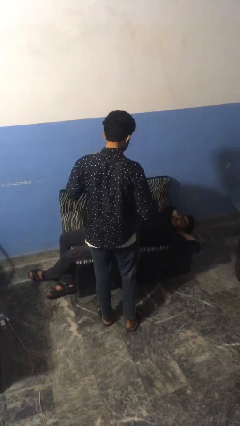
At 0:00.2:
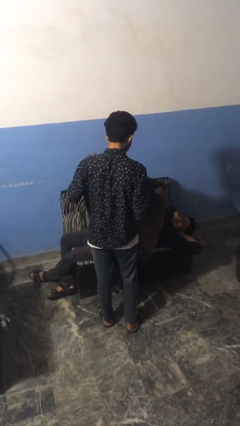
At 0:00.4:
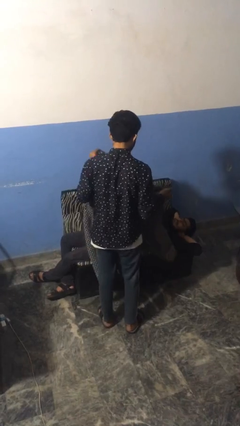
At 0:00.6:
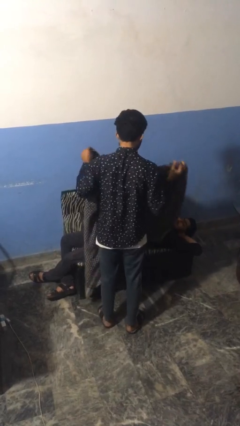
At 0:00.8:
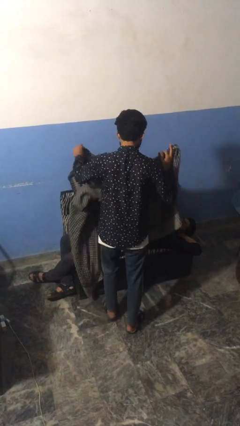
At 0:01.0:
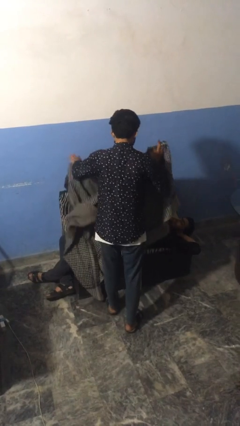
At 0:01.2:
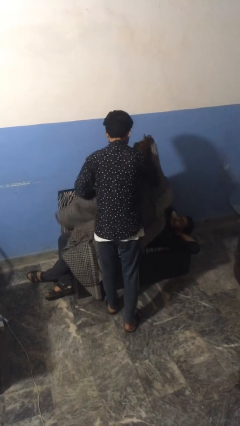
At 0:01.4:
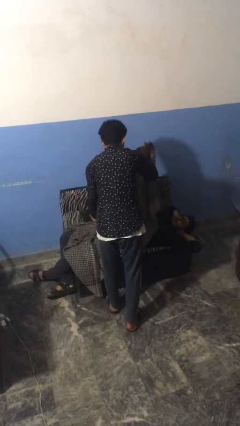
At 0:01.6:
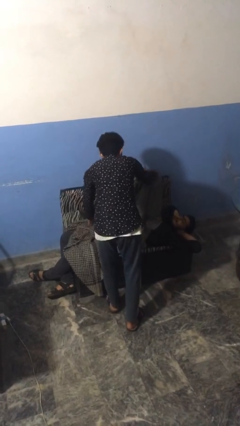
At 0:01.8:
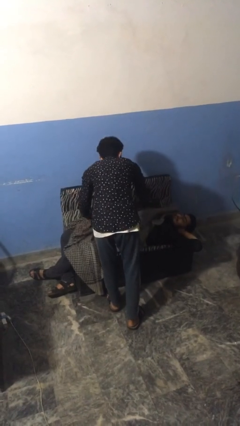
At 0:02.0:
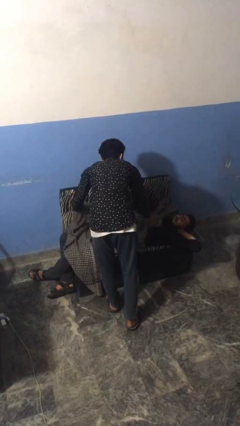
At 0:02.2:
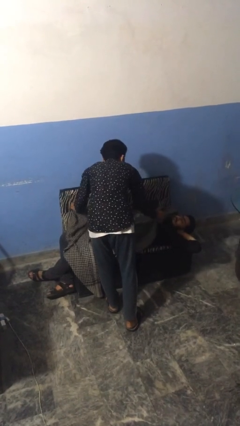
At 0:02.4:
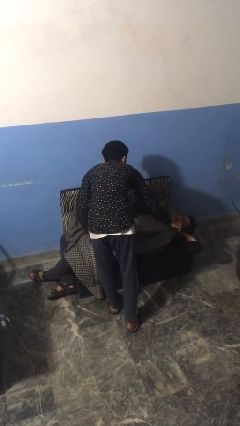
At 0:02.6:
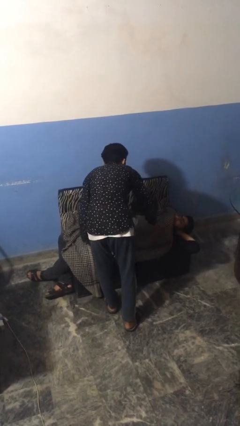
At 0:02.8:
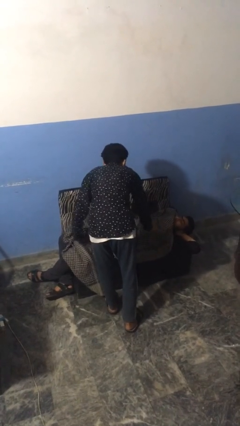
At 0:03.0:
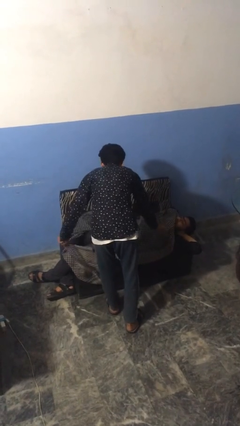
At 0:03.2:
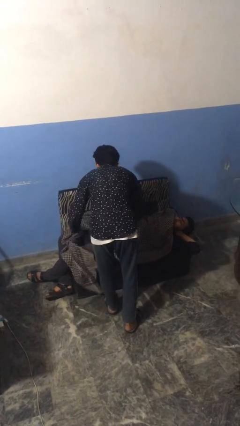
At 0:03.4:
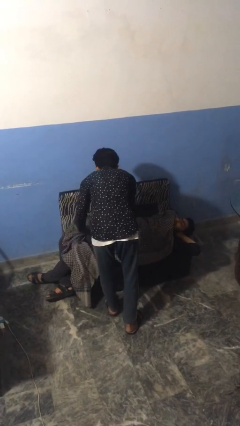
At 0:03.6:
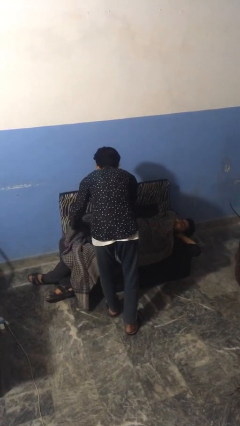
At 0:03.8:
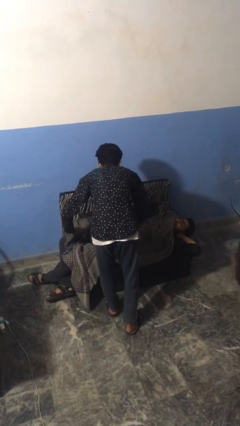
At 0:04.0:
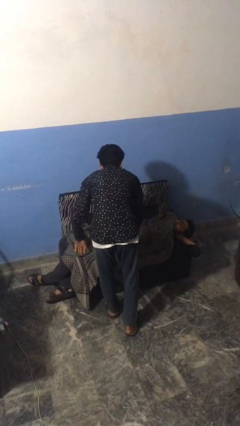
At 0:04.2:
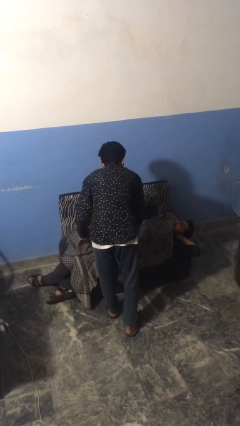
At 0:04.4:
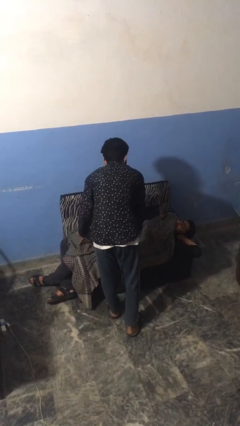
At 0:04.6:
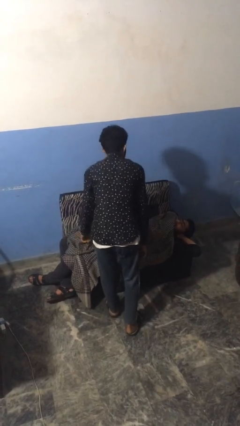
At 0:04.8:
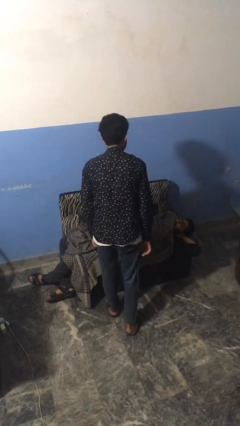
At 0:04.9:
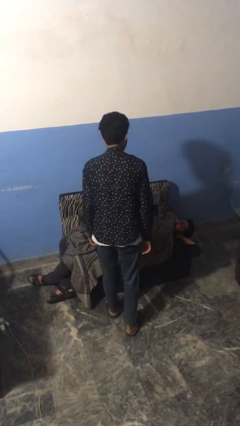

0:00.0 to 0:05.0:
person covers friend with blanket

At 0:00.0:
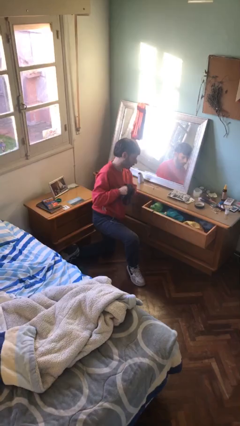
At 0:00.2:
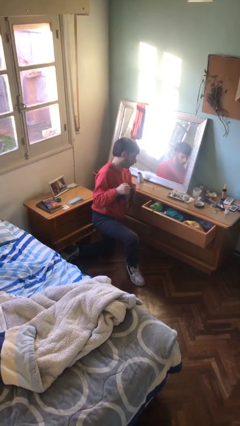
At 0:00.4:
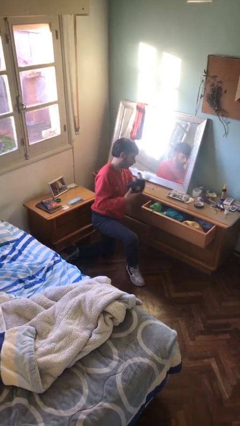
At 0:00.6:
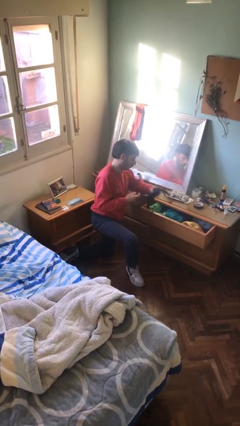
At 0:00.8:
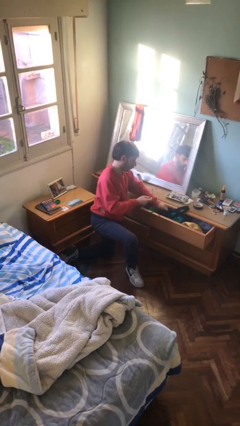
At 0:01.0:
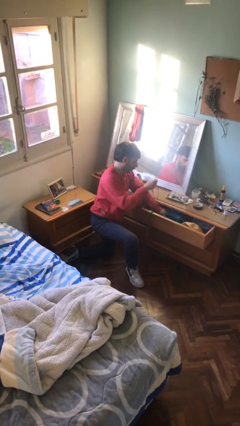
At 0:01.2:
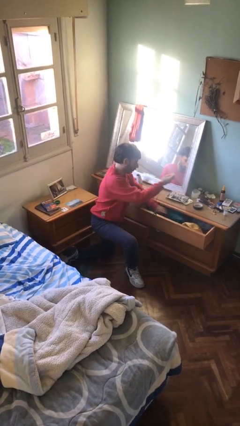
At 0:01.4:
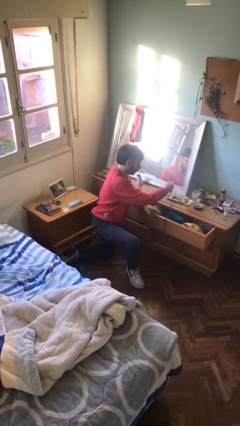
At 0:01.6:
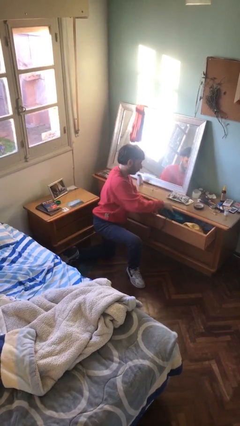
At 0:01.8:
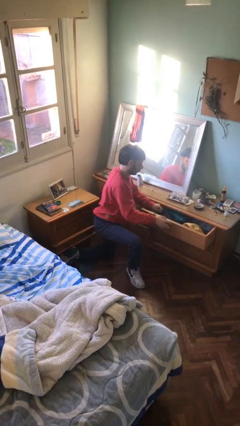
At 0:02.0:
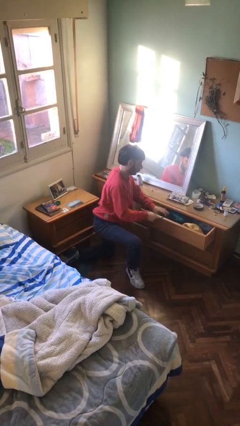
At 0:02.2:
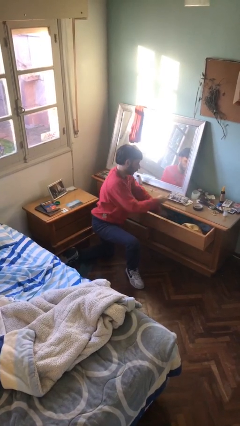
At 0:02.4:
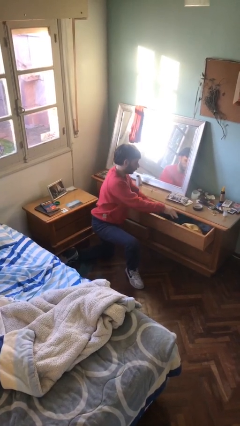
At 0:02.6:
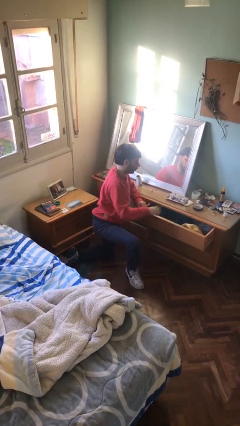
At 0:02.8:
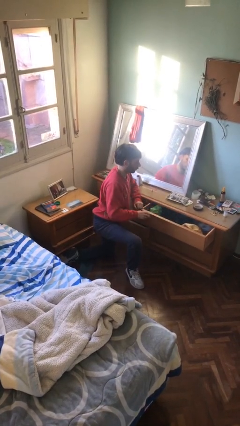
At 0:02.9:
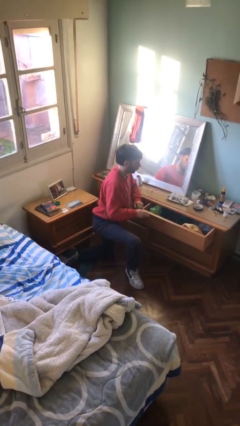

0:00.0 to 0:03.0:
person puts clothes into dresser

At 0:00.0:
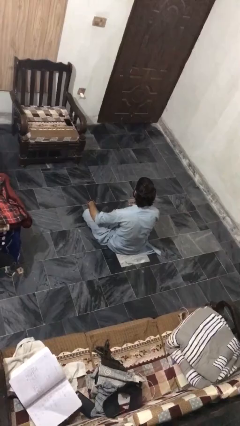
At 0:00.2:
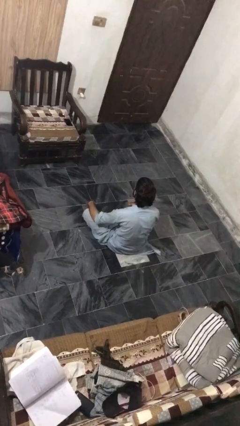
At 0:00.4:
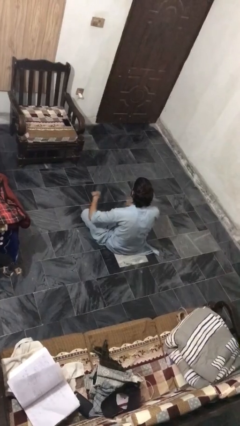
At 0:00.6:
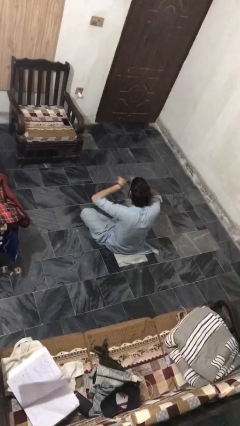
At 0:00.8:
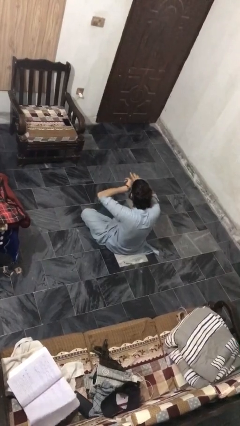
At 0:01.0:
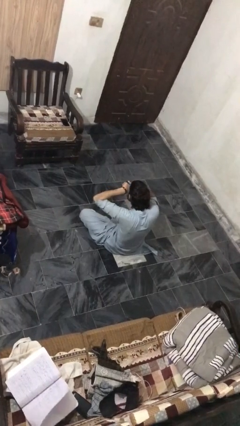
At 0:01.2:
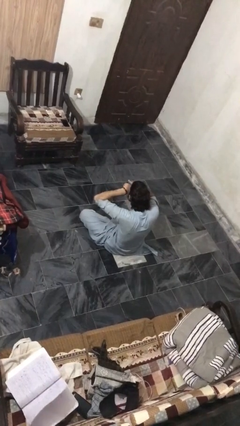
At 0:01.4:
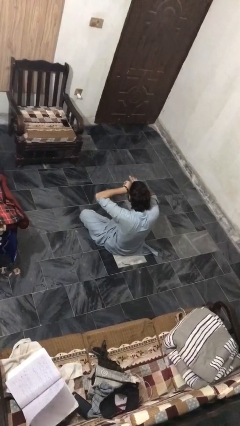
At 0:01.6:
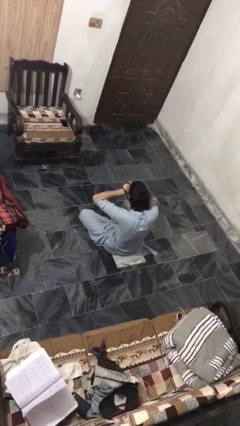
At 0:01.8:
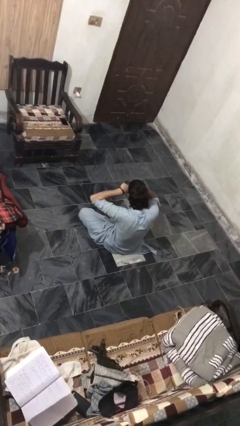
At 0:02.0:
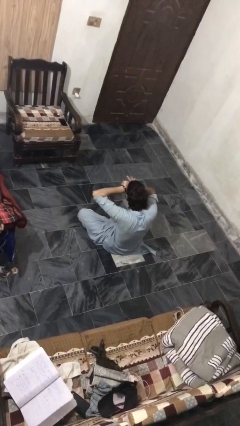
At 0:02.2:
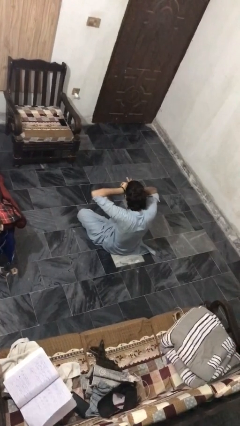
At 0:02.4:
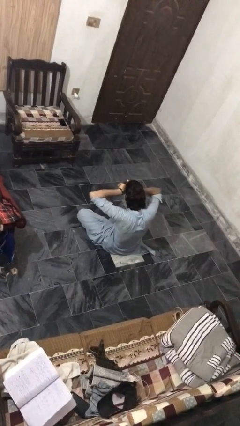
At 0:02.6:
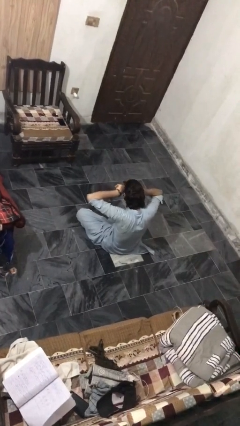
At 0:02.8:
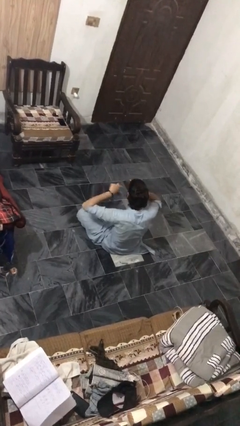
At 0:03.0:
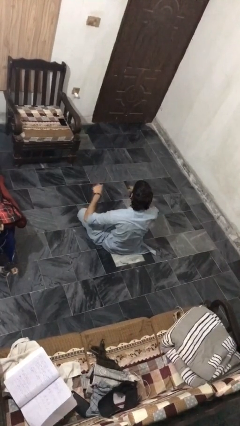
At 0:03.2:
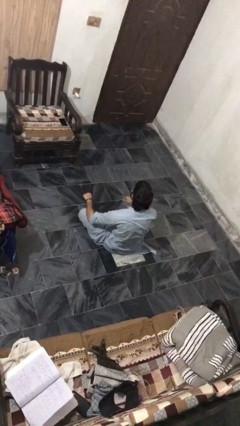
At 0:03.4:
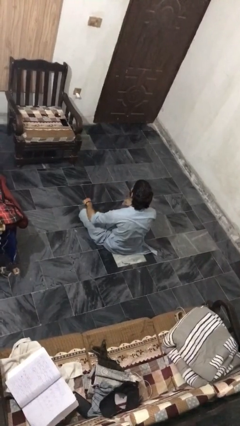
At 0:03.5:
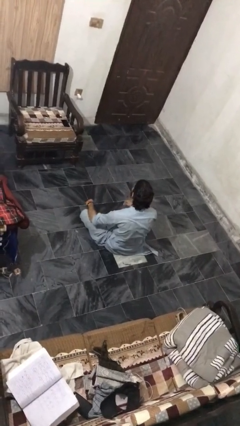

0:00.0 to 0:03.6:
person rubs eyes

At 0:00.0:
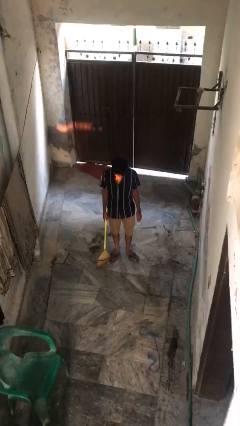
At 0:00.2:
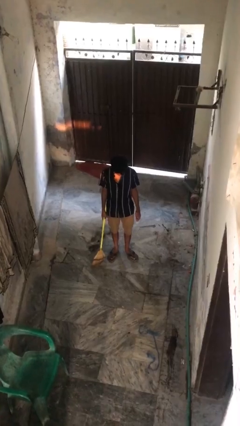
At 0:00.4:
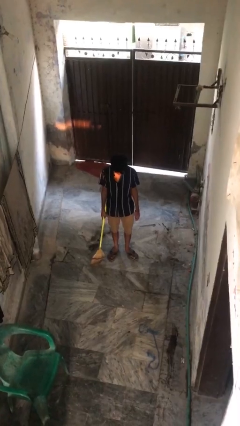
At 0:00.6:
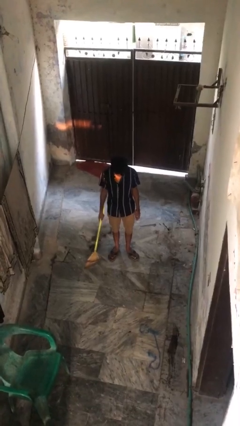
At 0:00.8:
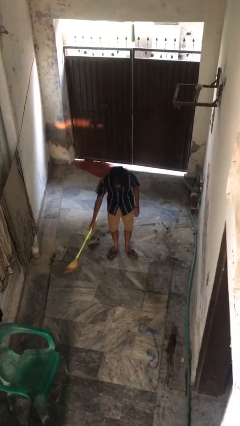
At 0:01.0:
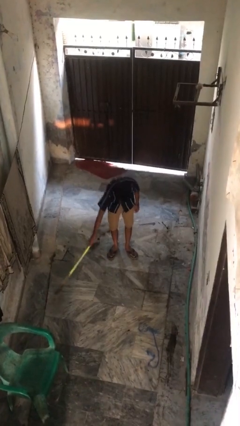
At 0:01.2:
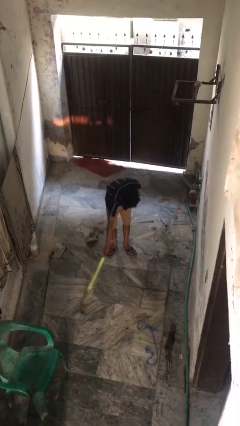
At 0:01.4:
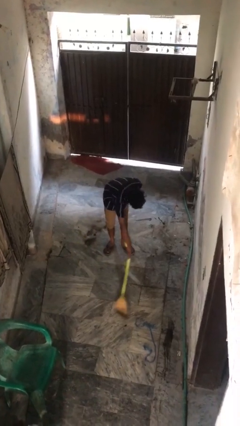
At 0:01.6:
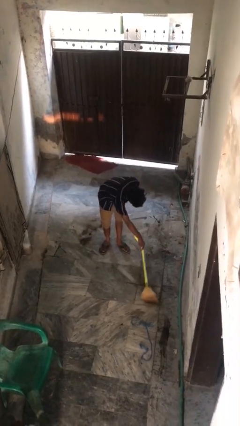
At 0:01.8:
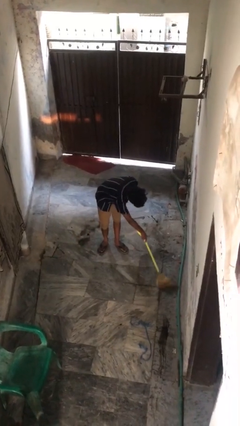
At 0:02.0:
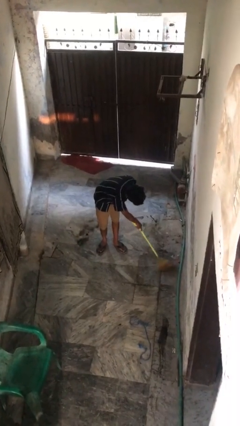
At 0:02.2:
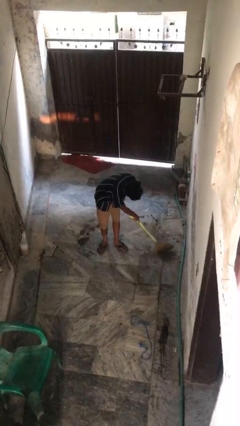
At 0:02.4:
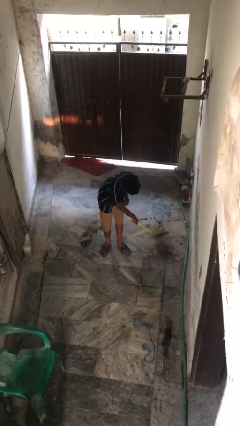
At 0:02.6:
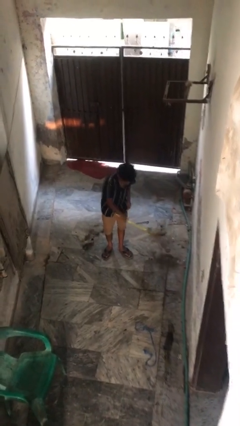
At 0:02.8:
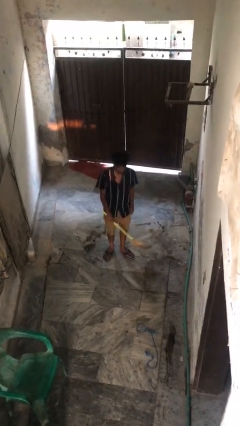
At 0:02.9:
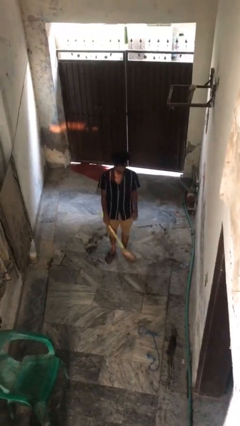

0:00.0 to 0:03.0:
person sweeps floor

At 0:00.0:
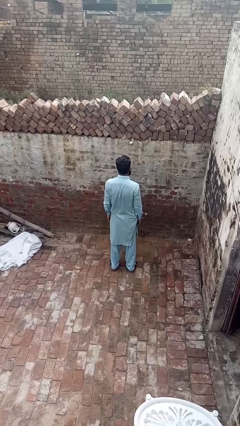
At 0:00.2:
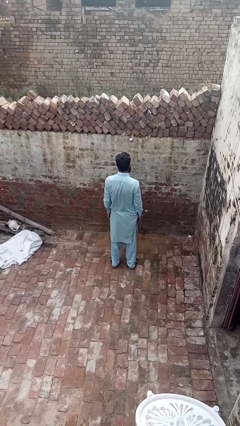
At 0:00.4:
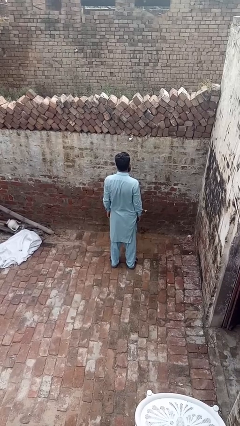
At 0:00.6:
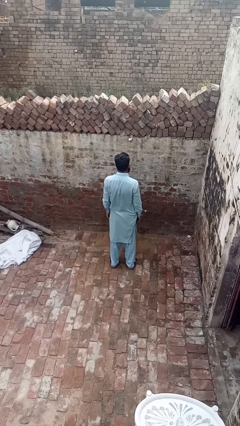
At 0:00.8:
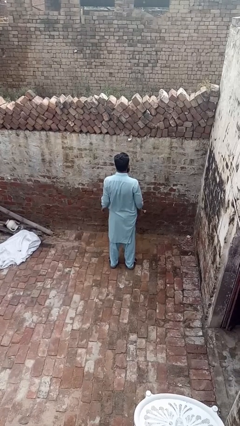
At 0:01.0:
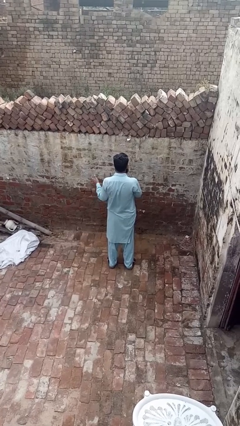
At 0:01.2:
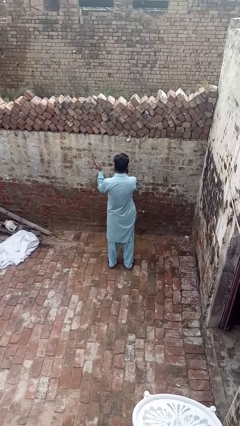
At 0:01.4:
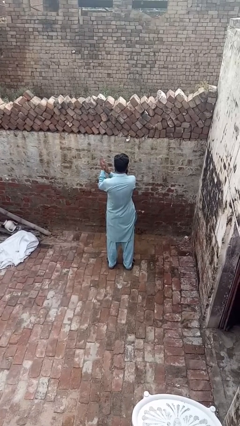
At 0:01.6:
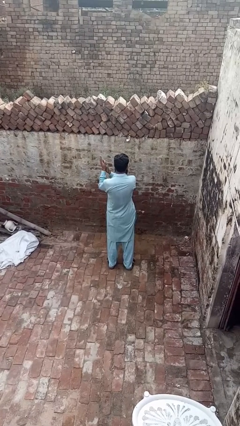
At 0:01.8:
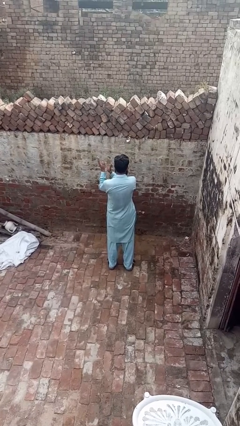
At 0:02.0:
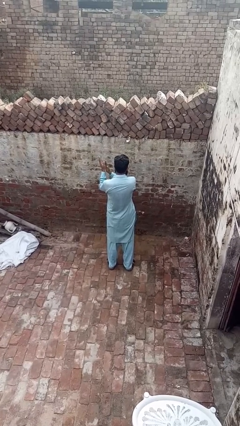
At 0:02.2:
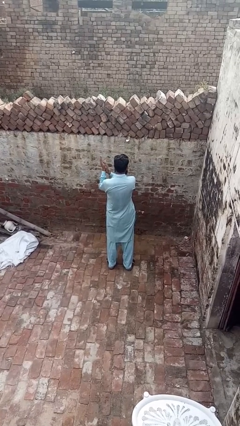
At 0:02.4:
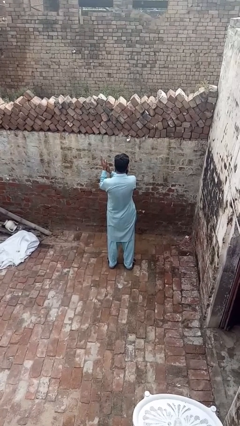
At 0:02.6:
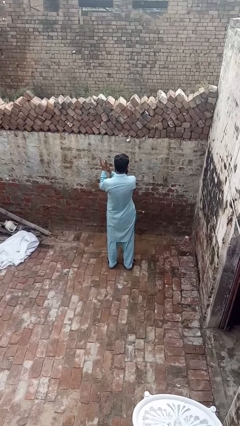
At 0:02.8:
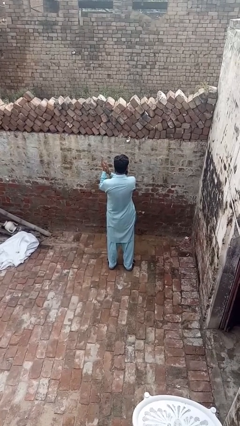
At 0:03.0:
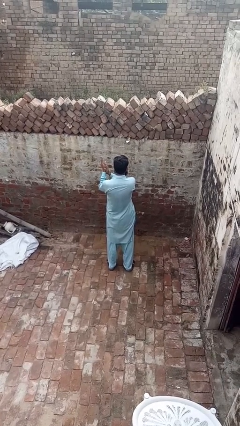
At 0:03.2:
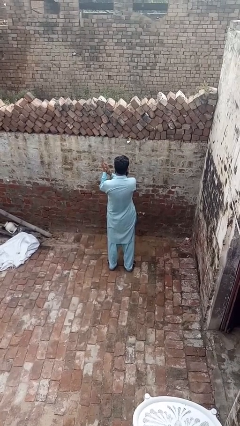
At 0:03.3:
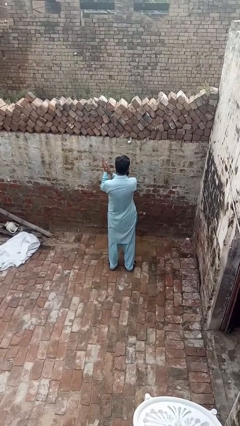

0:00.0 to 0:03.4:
person claps hands
